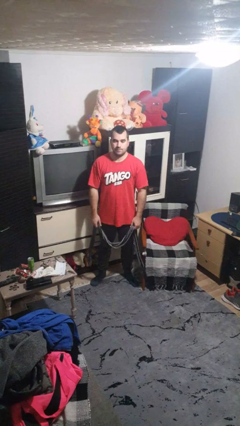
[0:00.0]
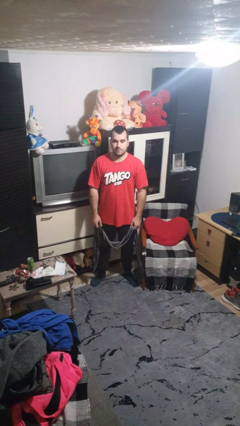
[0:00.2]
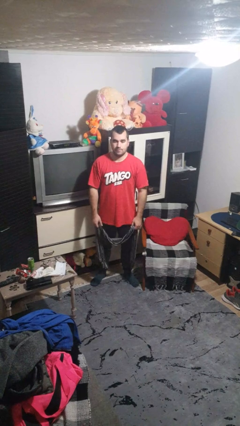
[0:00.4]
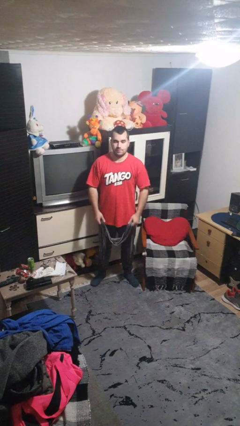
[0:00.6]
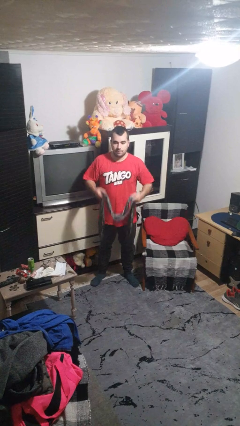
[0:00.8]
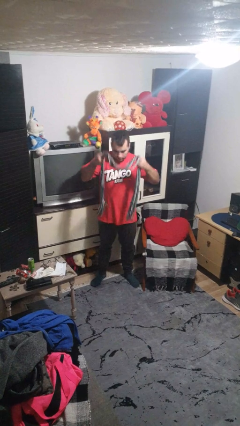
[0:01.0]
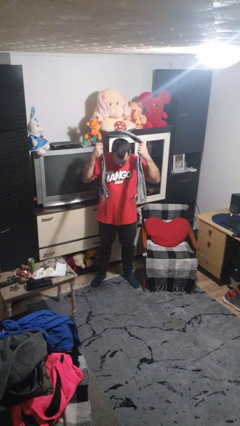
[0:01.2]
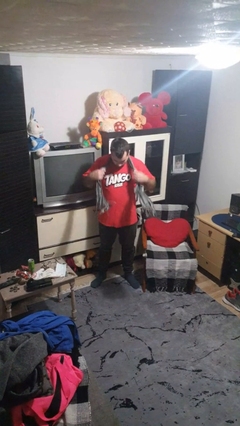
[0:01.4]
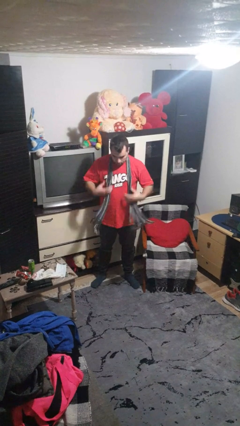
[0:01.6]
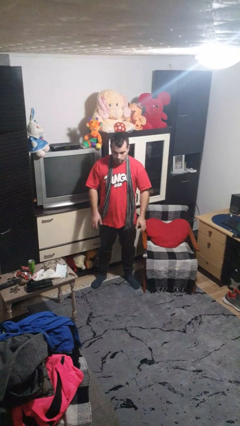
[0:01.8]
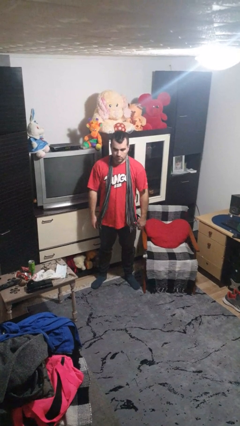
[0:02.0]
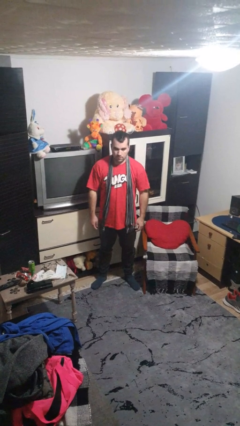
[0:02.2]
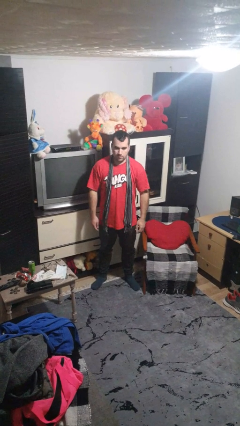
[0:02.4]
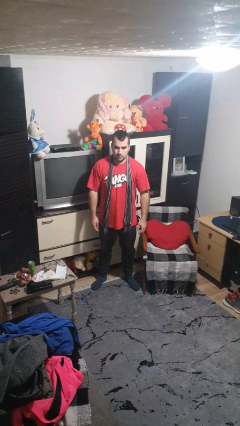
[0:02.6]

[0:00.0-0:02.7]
person puts on scarf

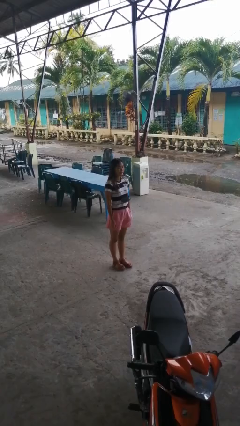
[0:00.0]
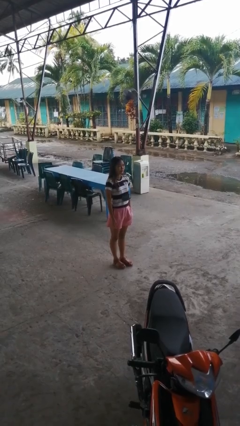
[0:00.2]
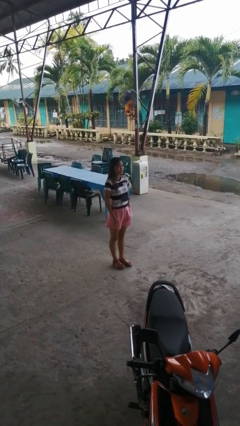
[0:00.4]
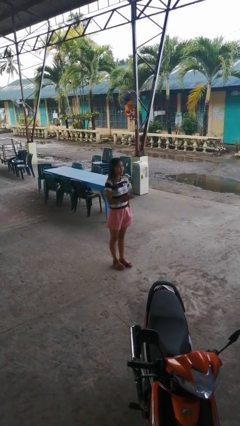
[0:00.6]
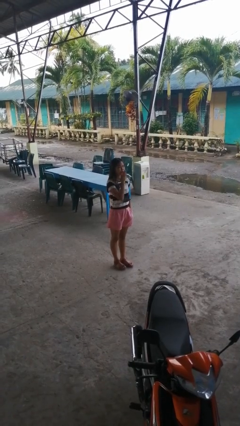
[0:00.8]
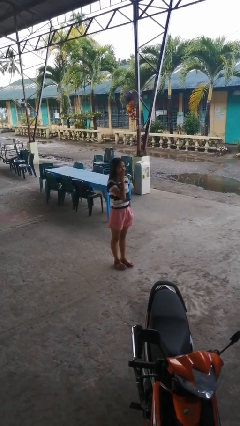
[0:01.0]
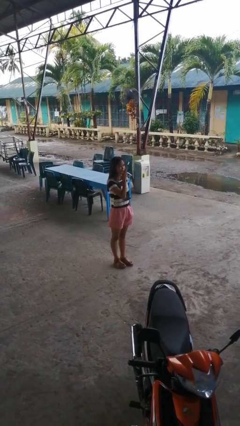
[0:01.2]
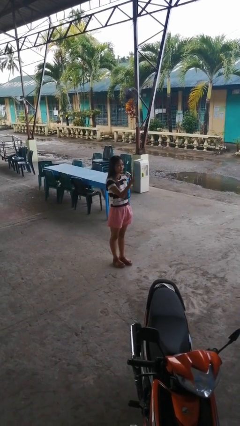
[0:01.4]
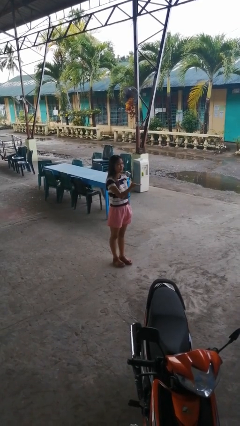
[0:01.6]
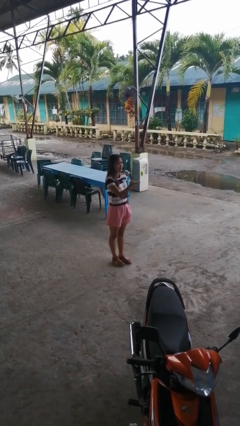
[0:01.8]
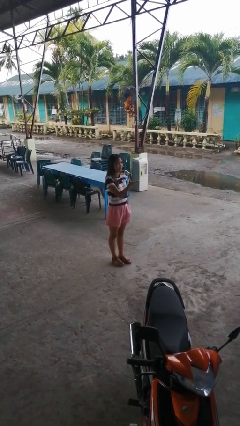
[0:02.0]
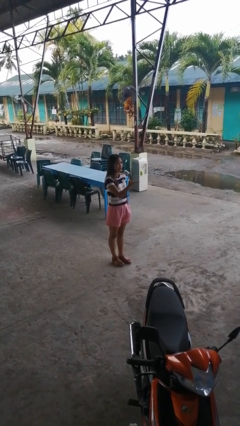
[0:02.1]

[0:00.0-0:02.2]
person gestures blow kiss

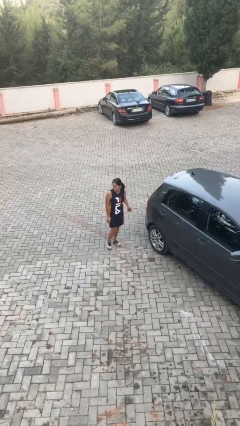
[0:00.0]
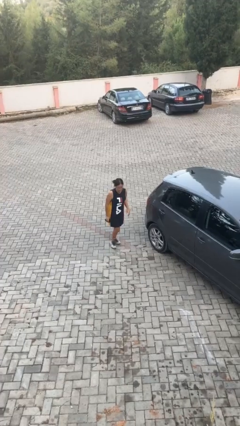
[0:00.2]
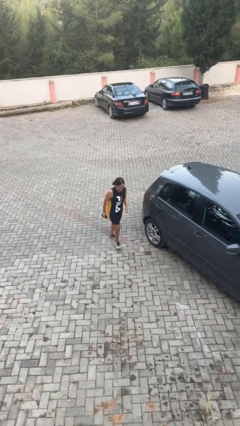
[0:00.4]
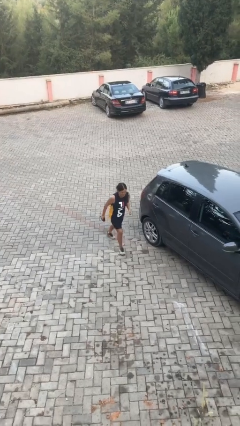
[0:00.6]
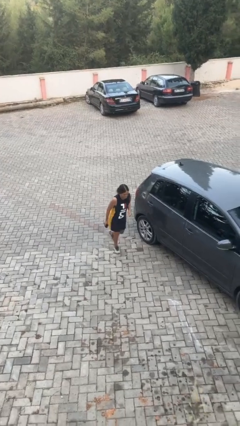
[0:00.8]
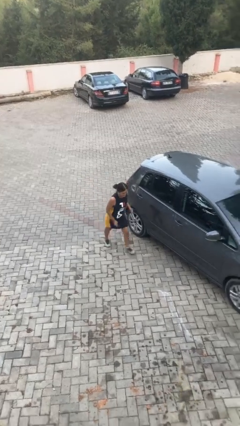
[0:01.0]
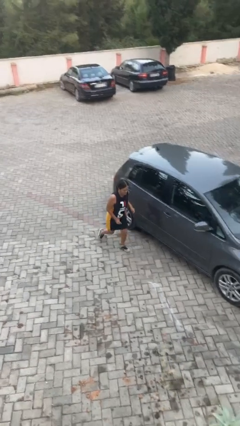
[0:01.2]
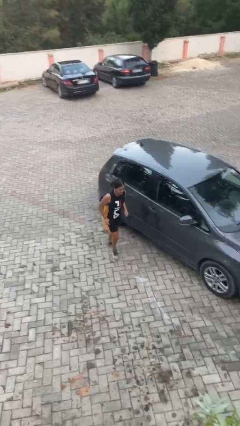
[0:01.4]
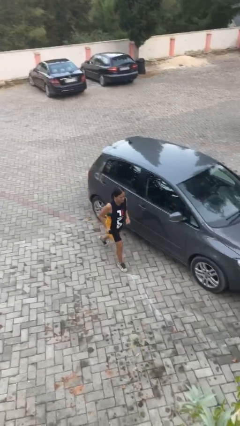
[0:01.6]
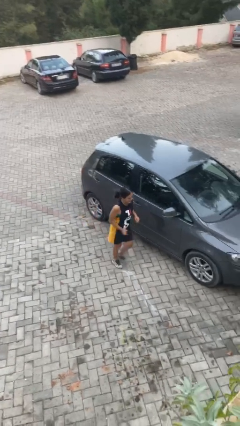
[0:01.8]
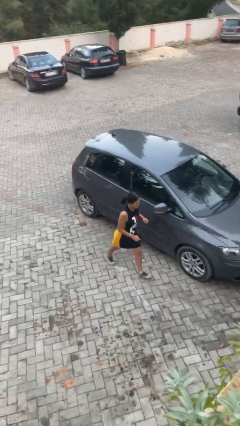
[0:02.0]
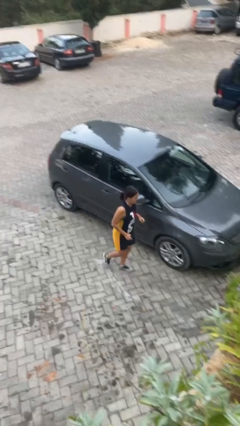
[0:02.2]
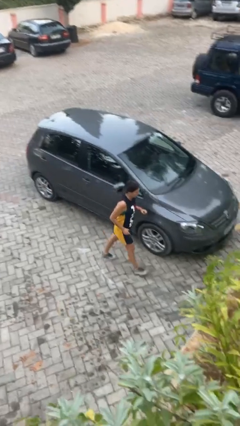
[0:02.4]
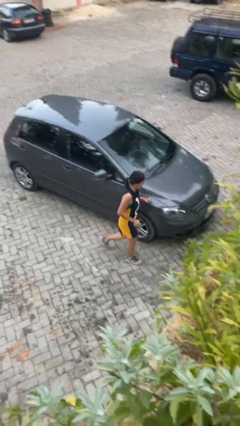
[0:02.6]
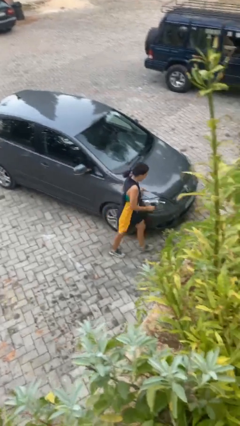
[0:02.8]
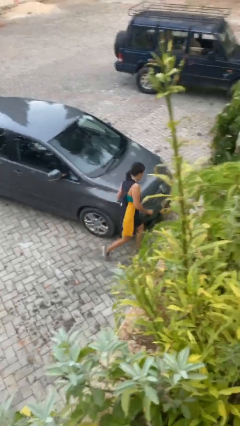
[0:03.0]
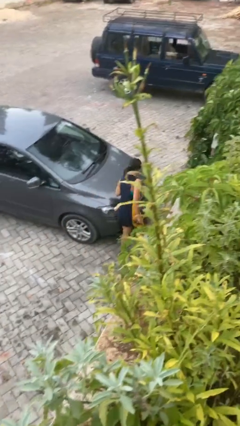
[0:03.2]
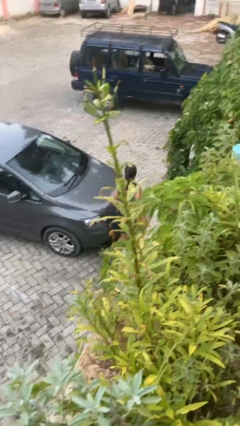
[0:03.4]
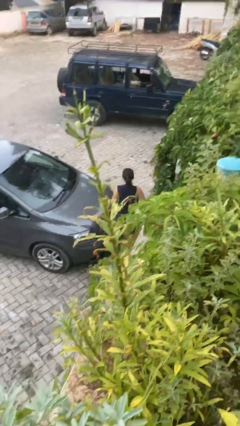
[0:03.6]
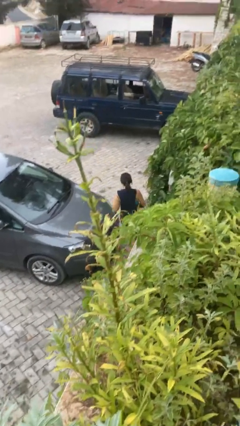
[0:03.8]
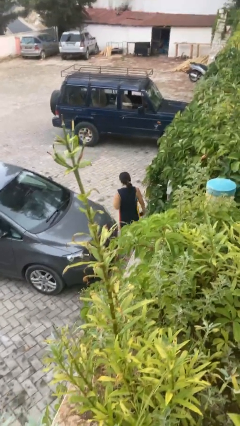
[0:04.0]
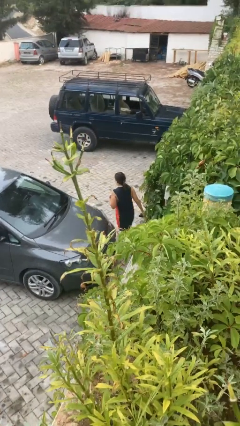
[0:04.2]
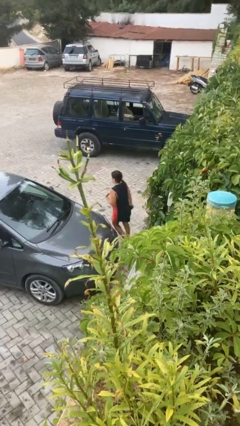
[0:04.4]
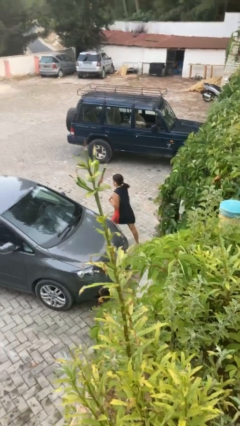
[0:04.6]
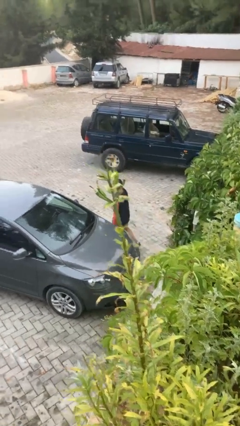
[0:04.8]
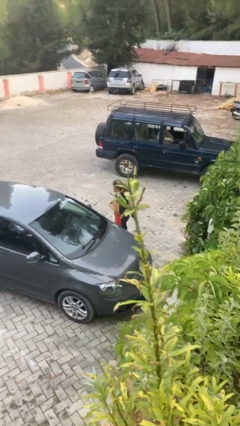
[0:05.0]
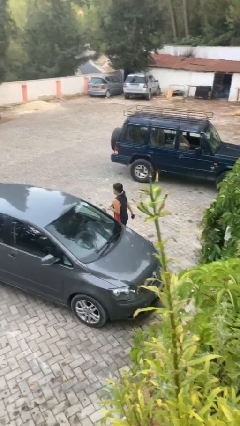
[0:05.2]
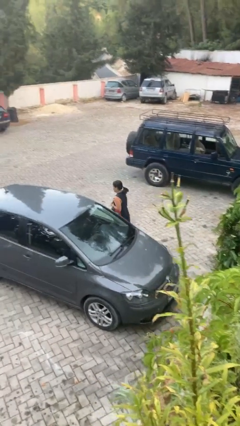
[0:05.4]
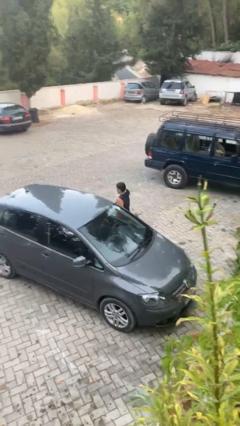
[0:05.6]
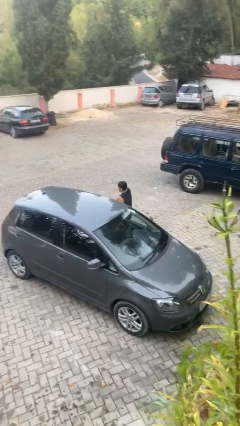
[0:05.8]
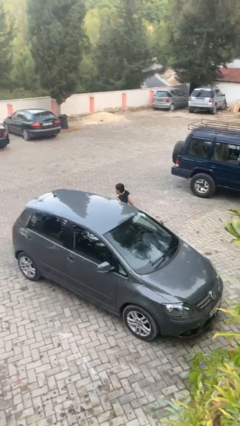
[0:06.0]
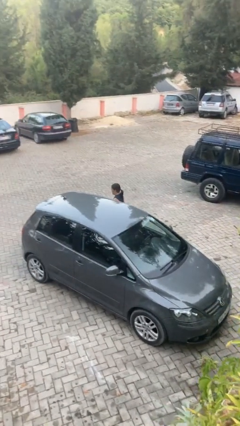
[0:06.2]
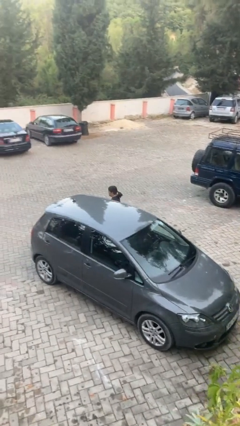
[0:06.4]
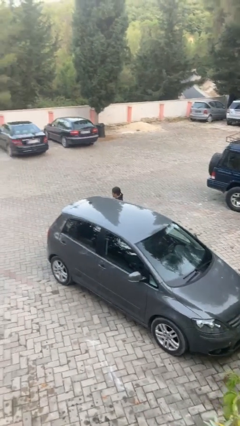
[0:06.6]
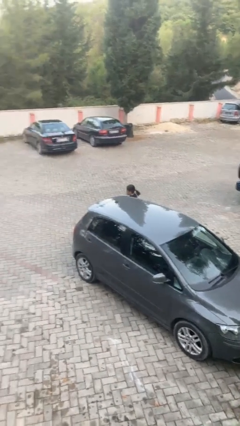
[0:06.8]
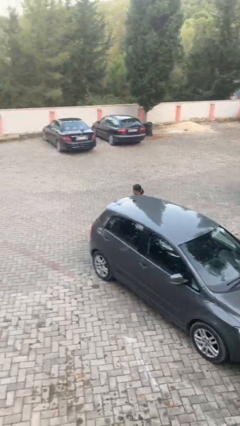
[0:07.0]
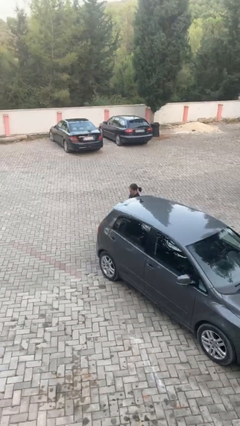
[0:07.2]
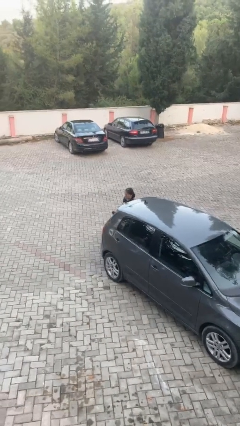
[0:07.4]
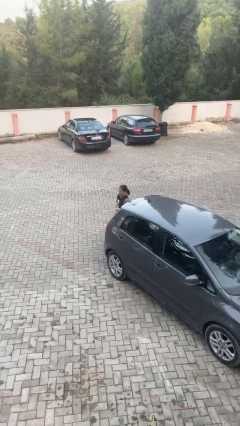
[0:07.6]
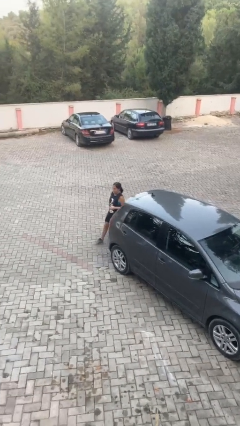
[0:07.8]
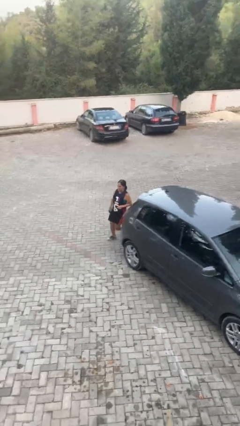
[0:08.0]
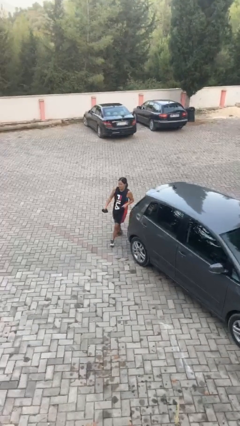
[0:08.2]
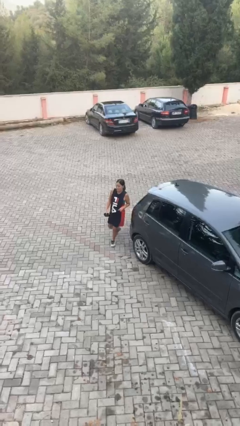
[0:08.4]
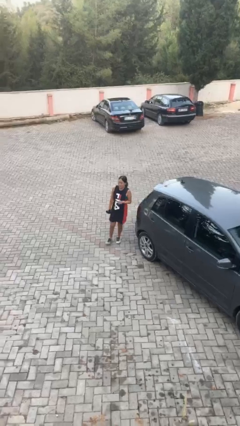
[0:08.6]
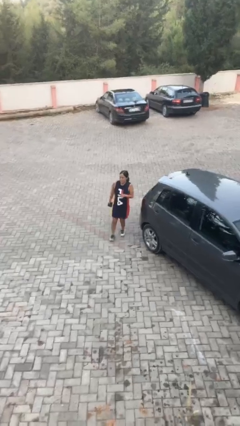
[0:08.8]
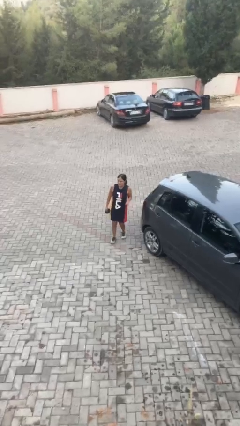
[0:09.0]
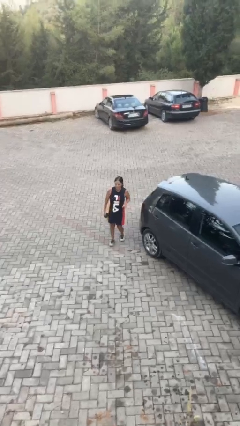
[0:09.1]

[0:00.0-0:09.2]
person walks around car

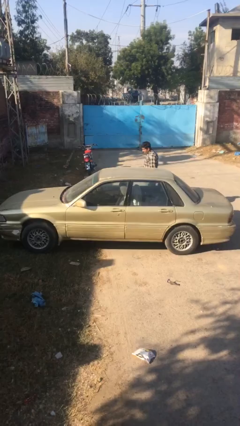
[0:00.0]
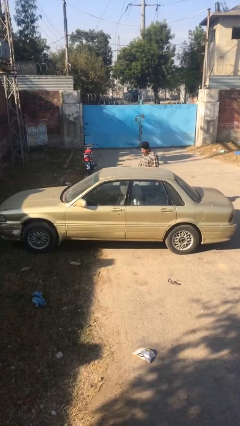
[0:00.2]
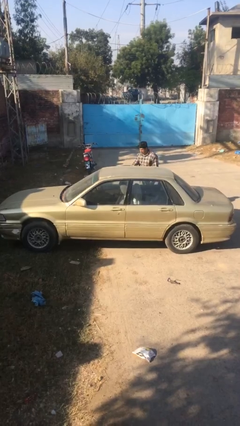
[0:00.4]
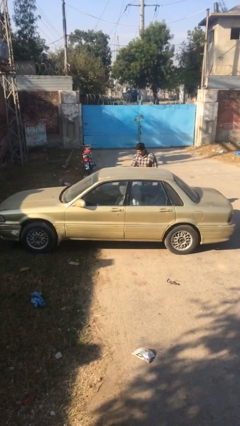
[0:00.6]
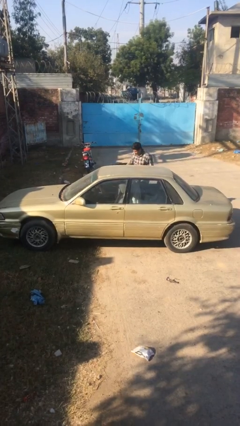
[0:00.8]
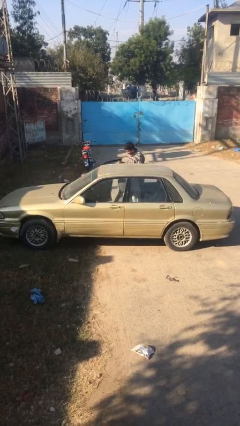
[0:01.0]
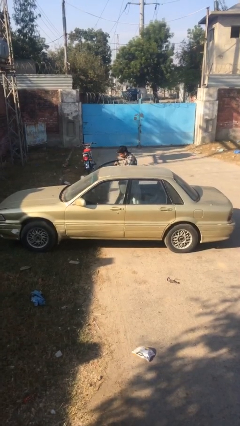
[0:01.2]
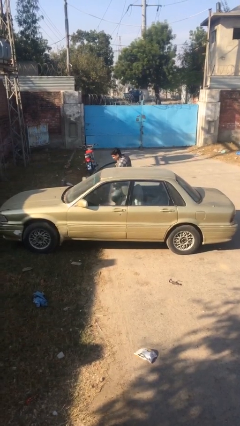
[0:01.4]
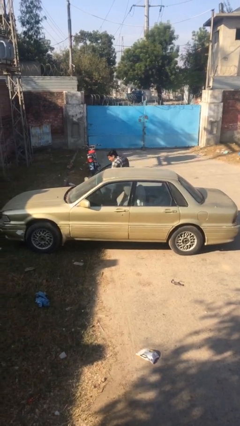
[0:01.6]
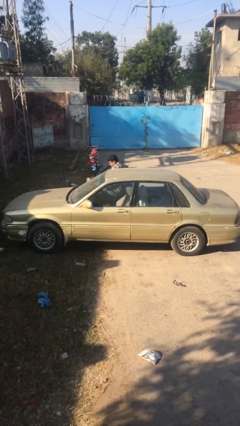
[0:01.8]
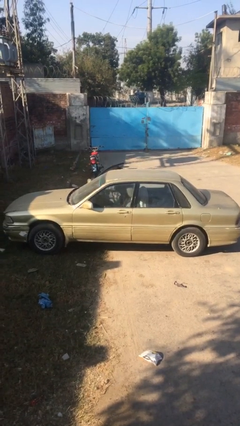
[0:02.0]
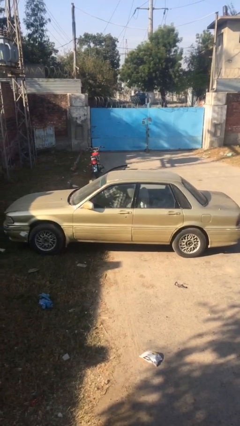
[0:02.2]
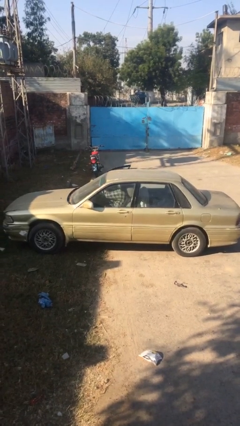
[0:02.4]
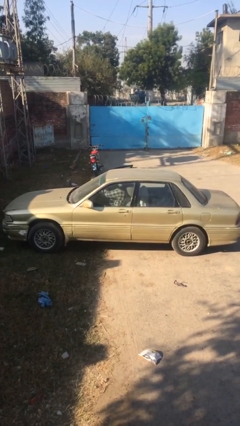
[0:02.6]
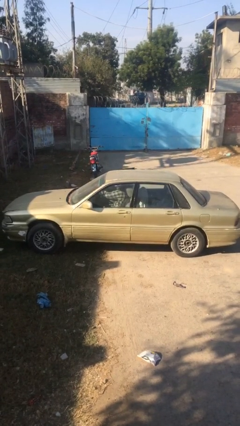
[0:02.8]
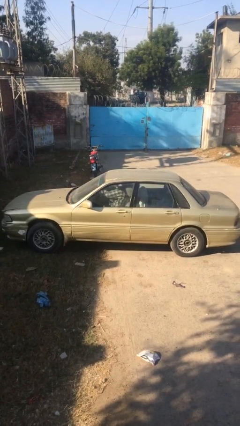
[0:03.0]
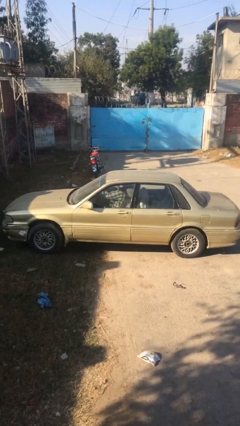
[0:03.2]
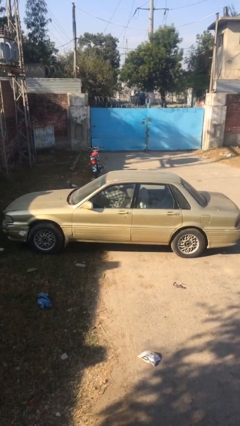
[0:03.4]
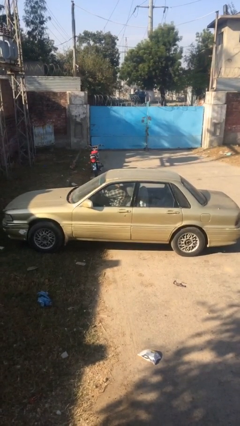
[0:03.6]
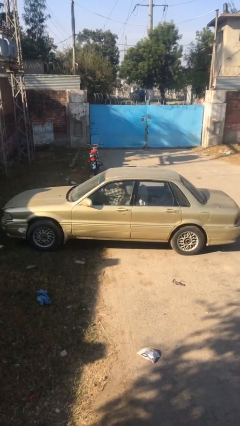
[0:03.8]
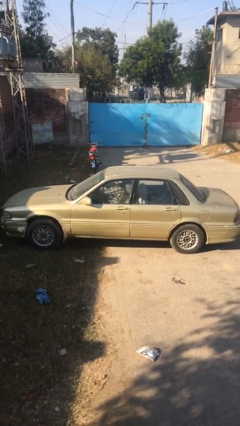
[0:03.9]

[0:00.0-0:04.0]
car picks up person
